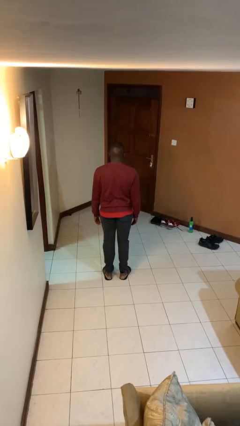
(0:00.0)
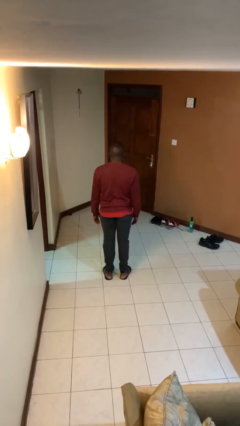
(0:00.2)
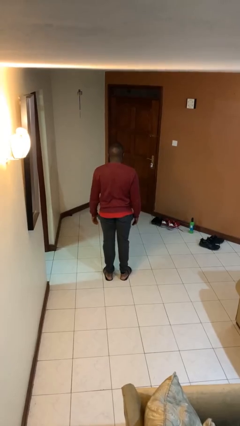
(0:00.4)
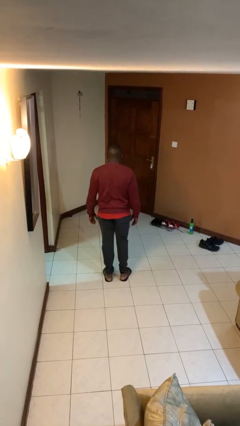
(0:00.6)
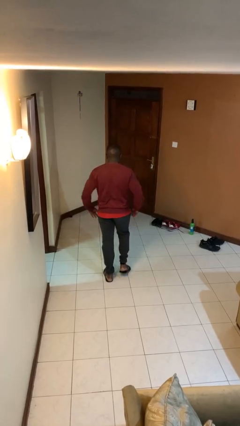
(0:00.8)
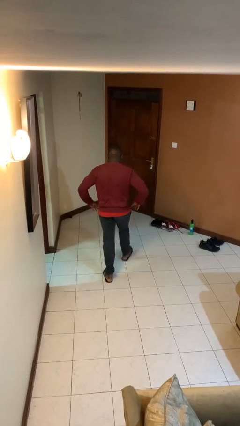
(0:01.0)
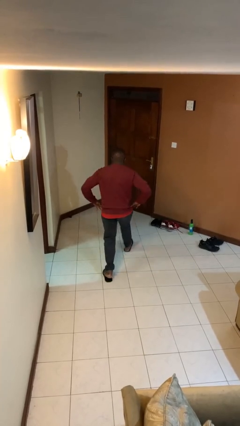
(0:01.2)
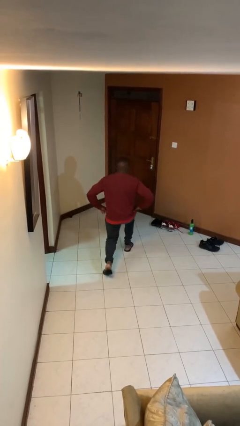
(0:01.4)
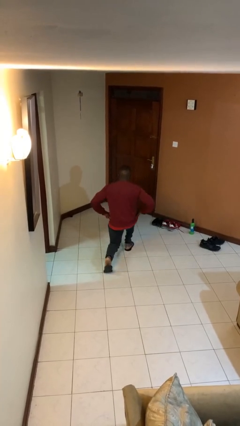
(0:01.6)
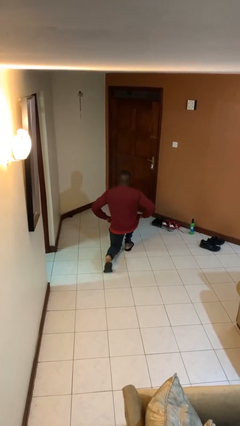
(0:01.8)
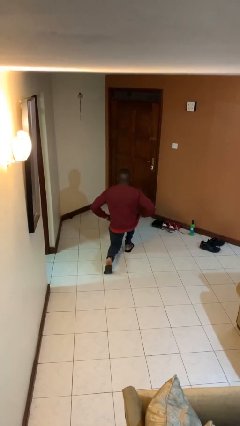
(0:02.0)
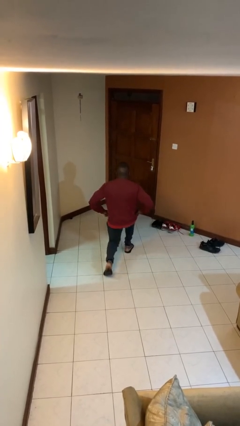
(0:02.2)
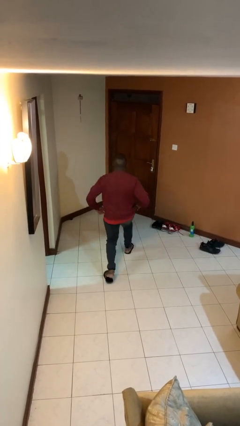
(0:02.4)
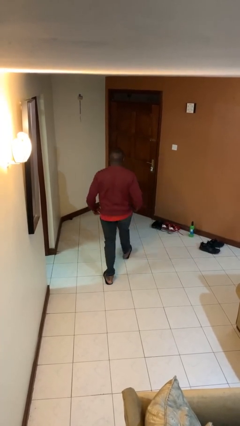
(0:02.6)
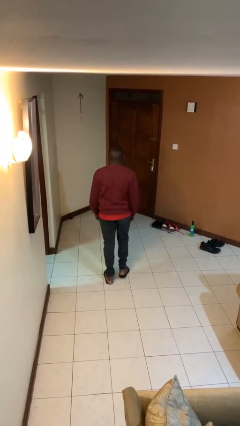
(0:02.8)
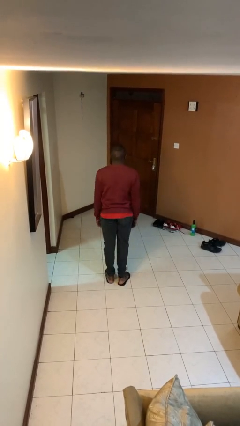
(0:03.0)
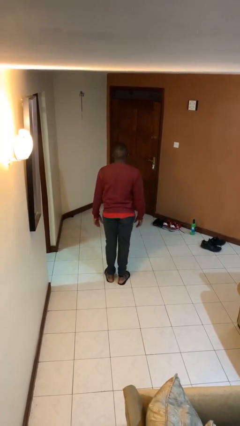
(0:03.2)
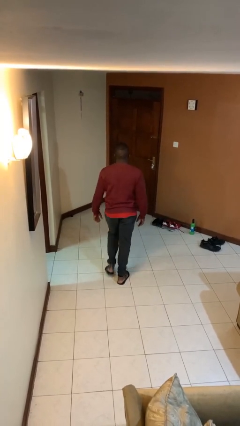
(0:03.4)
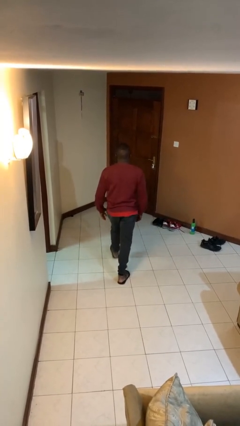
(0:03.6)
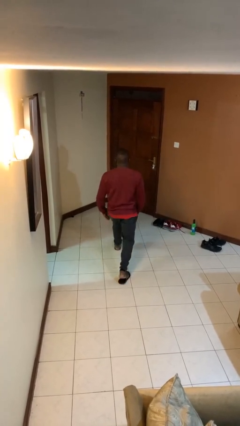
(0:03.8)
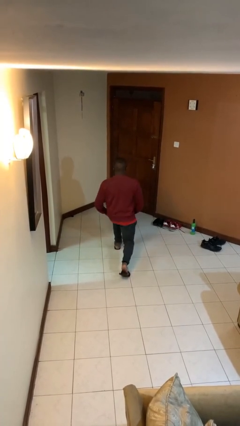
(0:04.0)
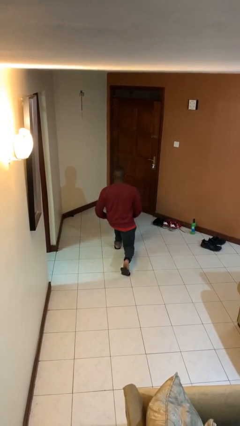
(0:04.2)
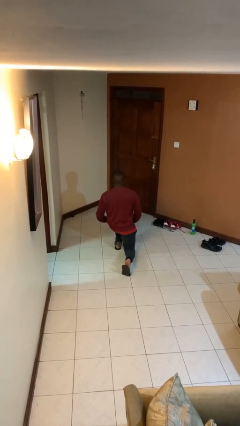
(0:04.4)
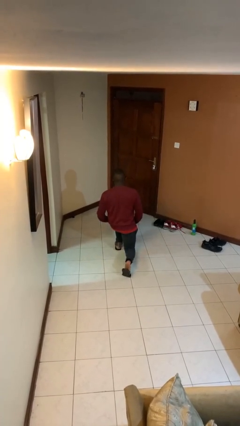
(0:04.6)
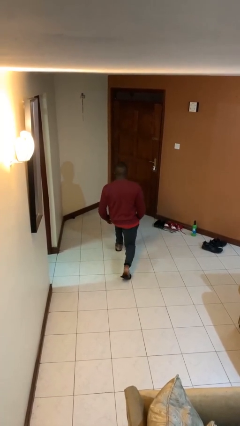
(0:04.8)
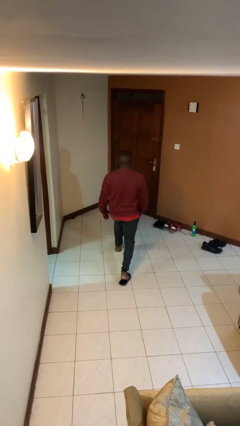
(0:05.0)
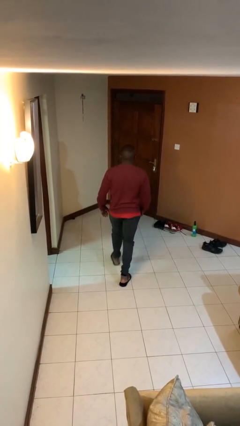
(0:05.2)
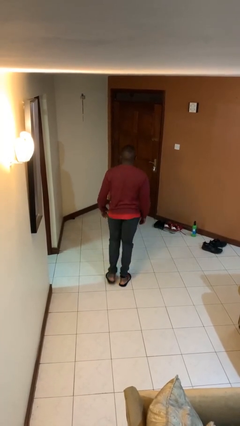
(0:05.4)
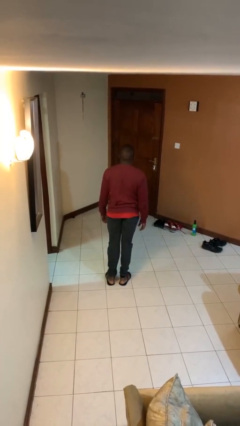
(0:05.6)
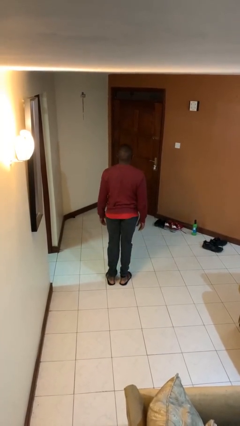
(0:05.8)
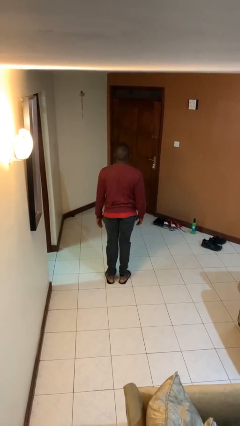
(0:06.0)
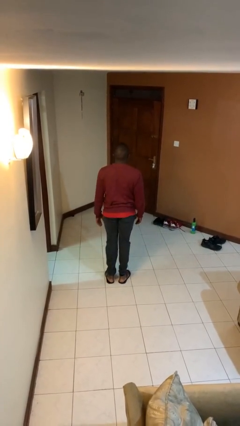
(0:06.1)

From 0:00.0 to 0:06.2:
person exercises with lunges

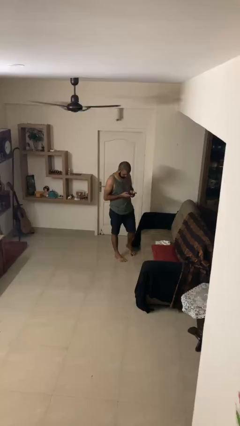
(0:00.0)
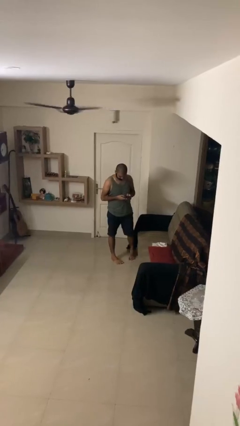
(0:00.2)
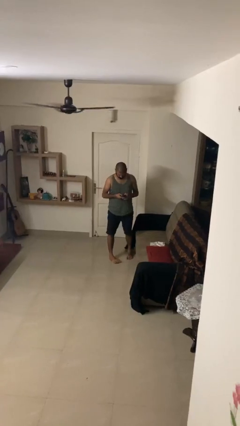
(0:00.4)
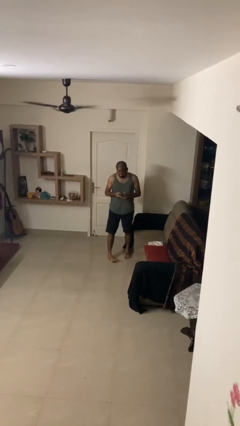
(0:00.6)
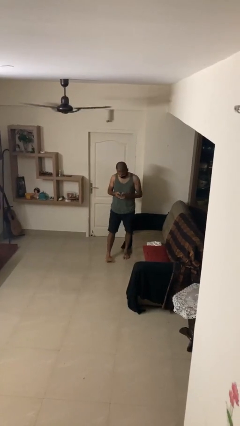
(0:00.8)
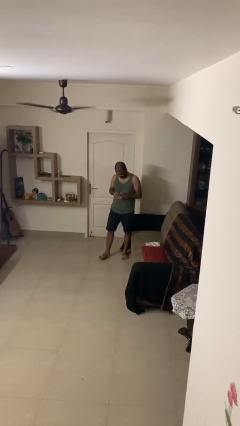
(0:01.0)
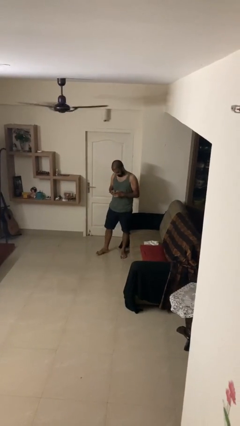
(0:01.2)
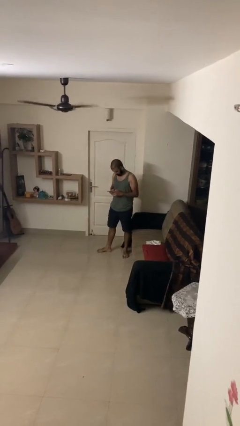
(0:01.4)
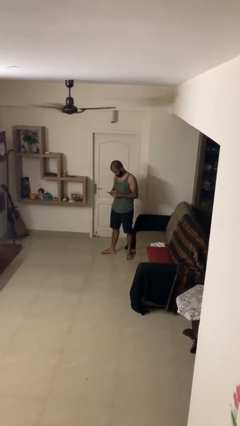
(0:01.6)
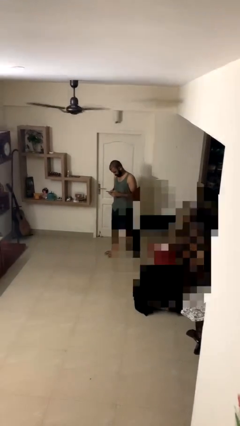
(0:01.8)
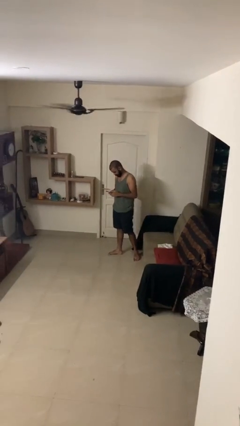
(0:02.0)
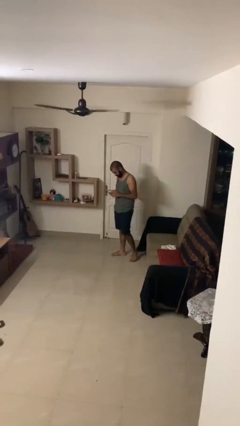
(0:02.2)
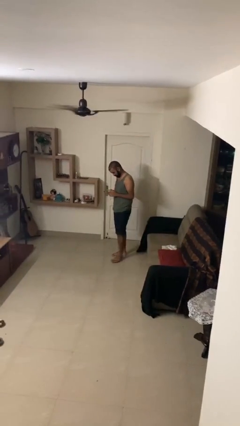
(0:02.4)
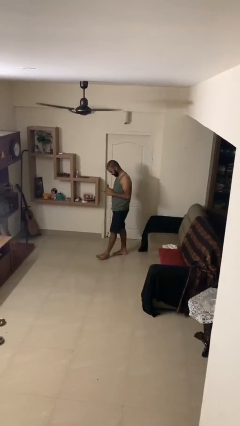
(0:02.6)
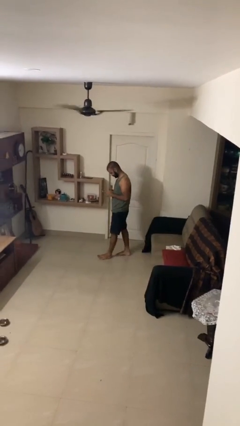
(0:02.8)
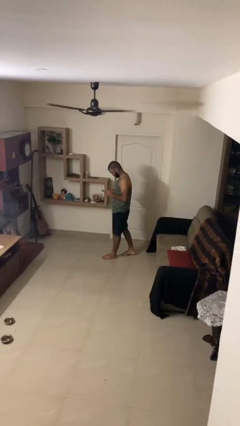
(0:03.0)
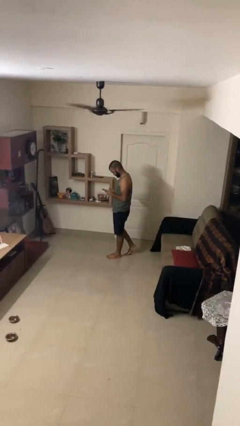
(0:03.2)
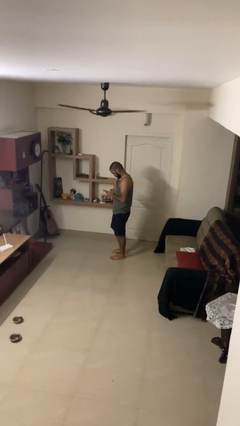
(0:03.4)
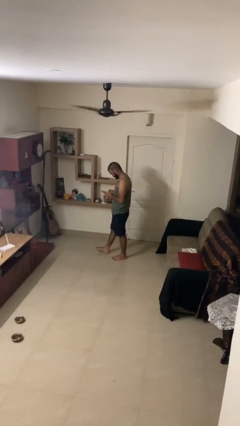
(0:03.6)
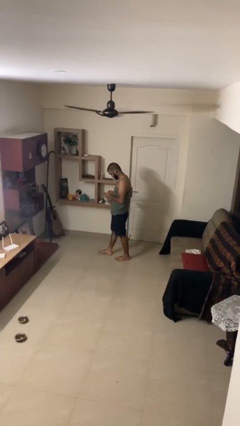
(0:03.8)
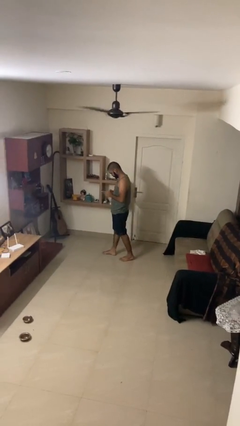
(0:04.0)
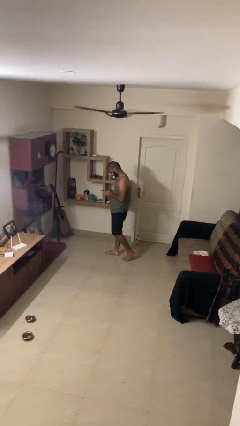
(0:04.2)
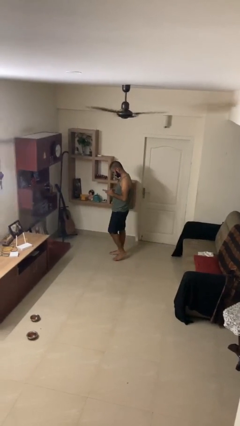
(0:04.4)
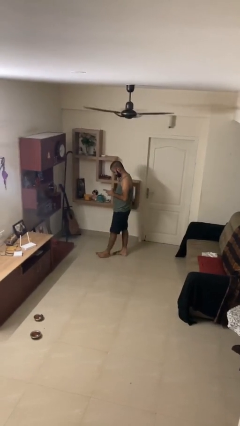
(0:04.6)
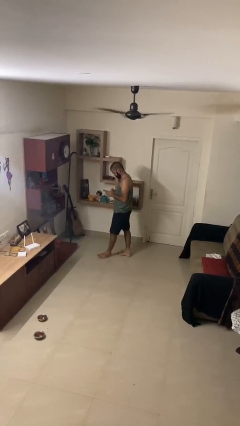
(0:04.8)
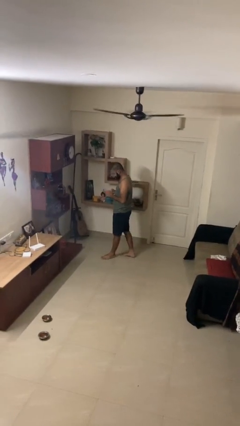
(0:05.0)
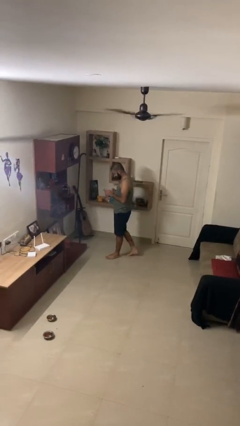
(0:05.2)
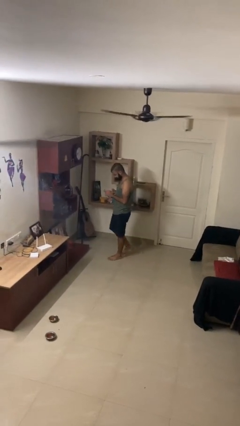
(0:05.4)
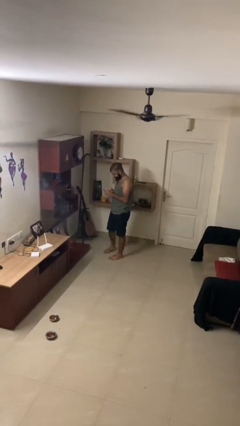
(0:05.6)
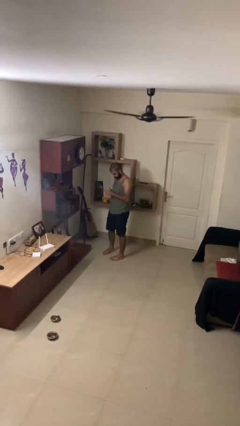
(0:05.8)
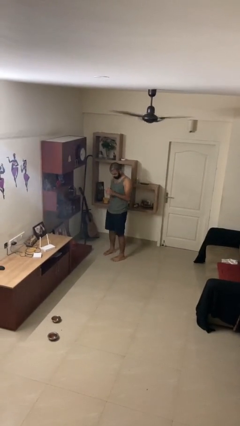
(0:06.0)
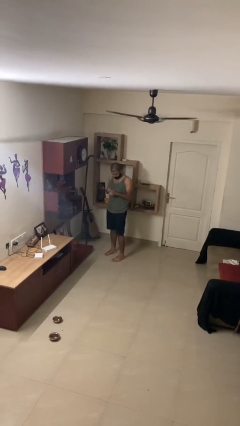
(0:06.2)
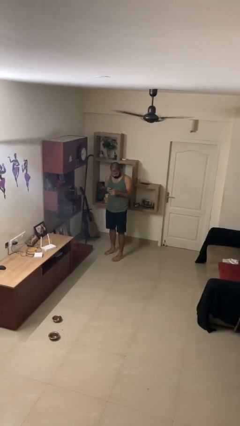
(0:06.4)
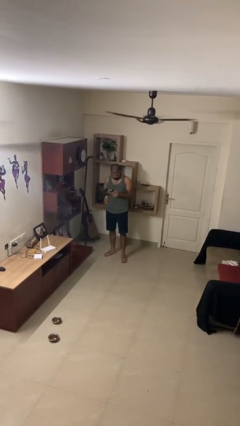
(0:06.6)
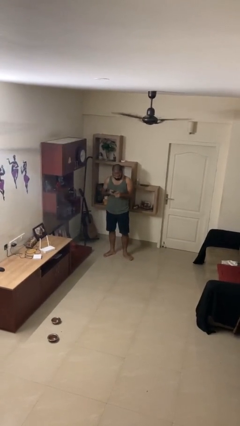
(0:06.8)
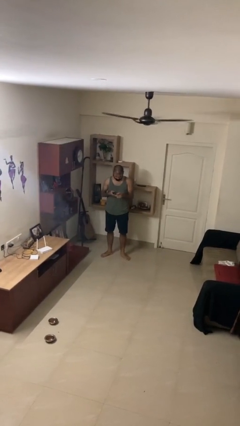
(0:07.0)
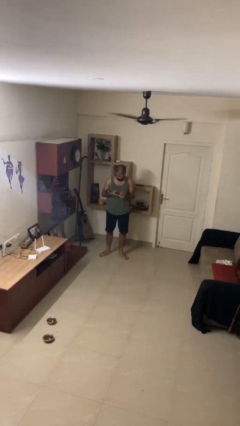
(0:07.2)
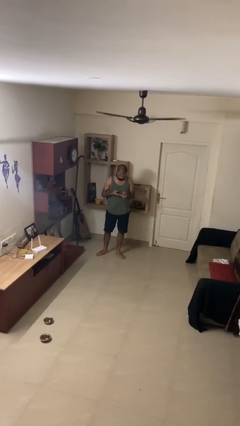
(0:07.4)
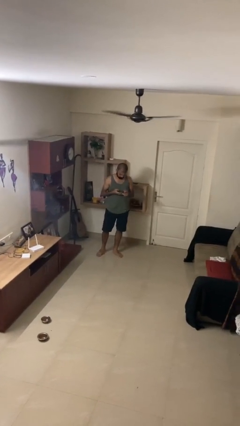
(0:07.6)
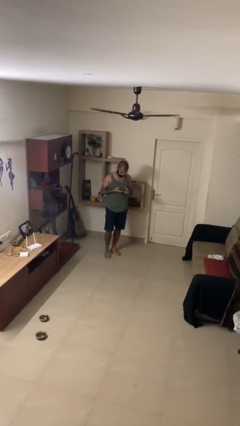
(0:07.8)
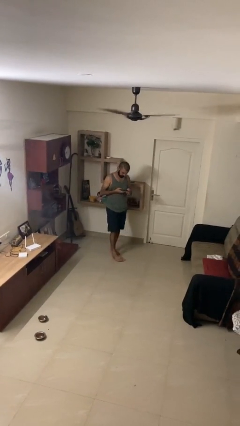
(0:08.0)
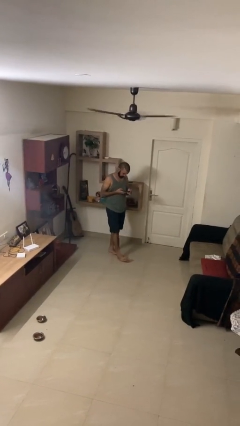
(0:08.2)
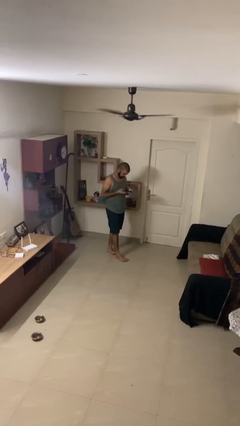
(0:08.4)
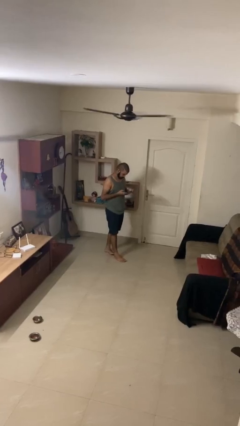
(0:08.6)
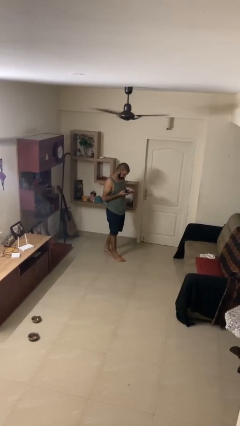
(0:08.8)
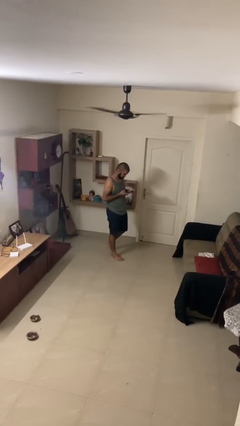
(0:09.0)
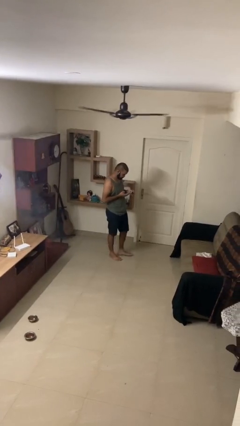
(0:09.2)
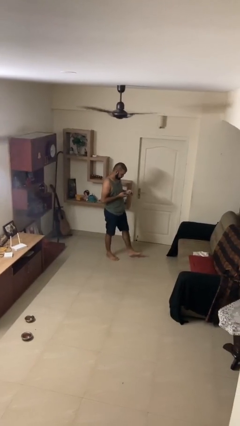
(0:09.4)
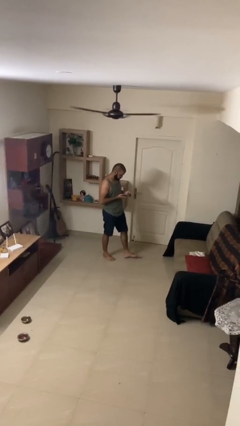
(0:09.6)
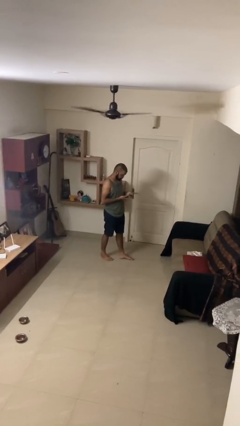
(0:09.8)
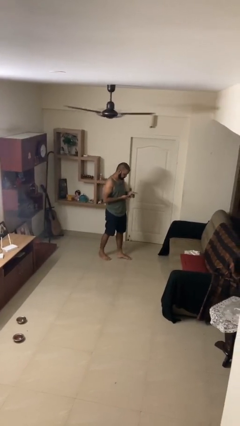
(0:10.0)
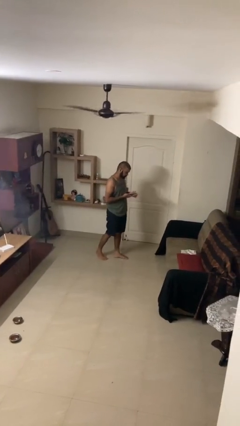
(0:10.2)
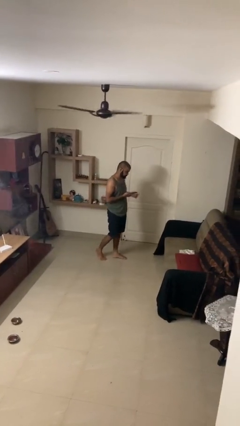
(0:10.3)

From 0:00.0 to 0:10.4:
person texts on phone

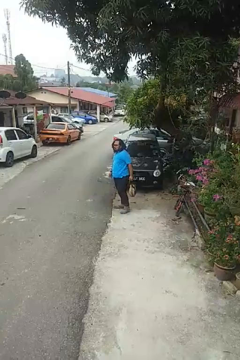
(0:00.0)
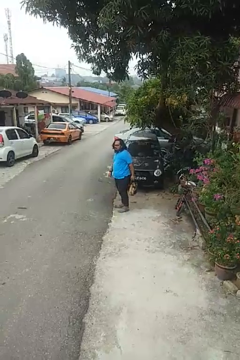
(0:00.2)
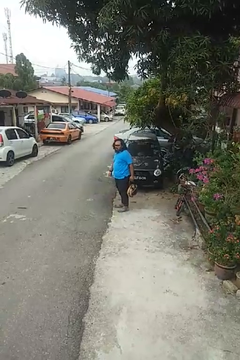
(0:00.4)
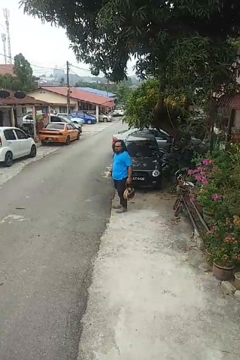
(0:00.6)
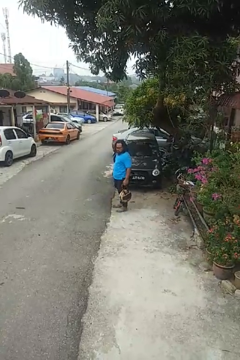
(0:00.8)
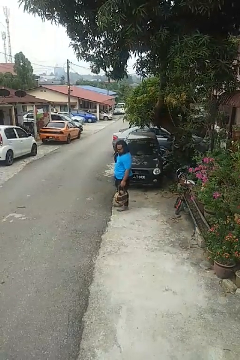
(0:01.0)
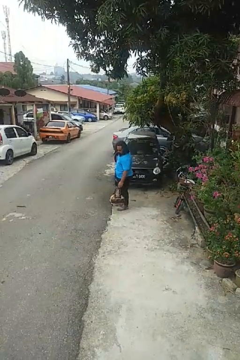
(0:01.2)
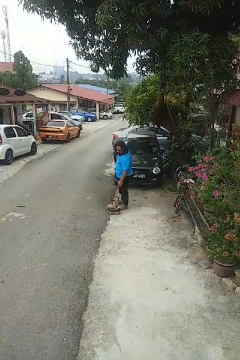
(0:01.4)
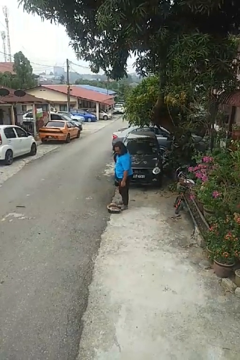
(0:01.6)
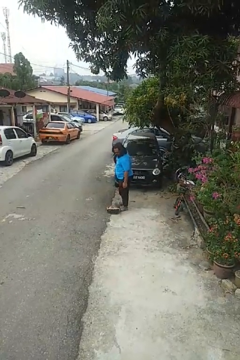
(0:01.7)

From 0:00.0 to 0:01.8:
person drops object
